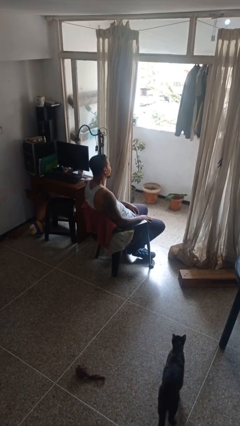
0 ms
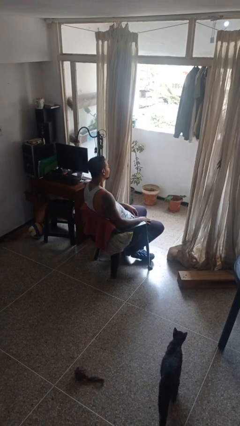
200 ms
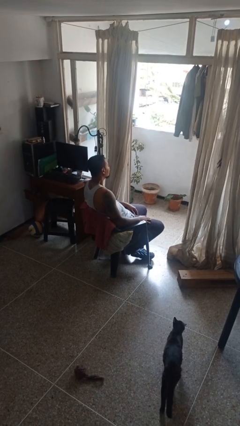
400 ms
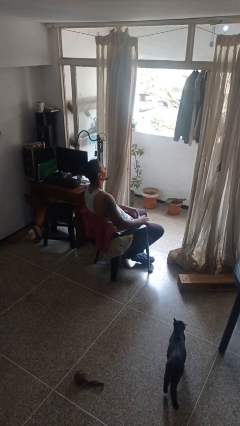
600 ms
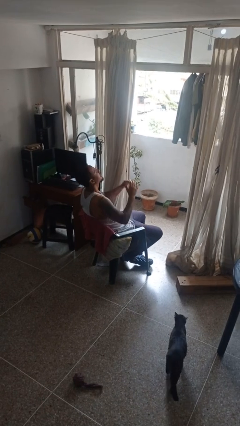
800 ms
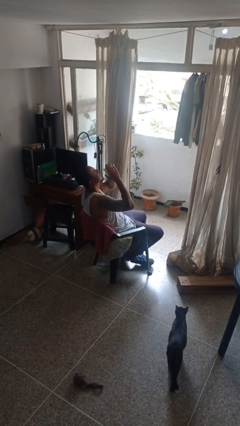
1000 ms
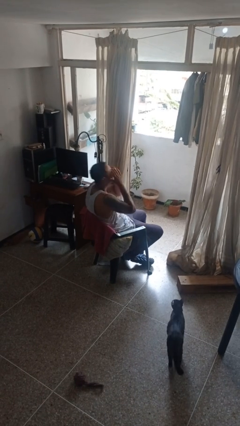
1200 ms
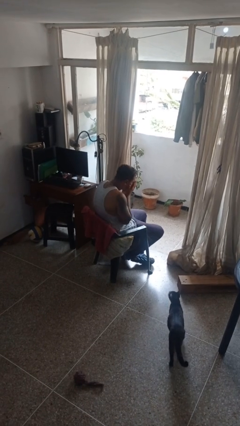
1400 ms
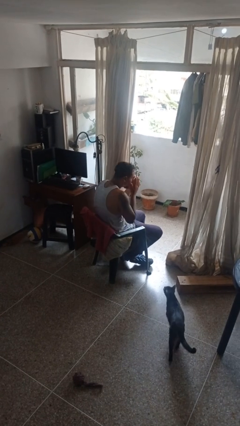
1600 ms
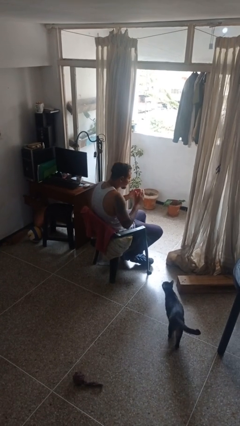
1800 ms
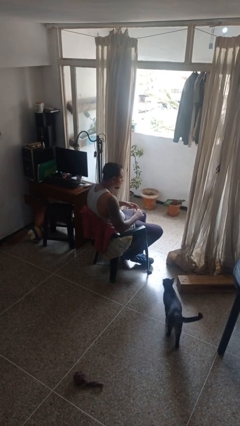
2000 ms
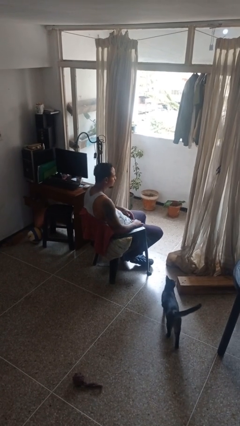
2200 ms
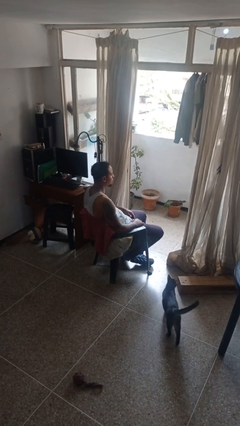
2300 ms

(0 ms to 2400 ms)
person sneezes into hand

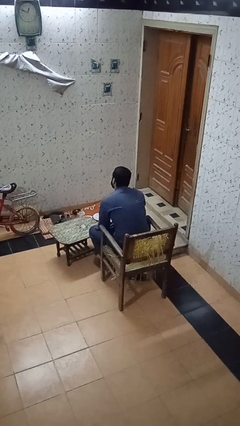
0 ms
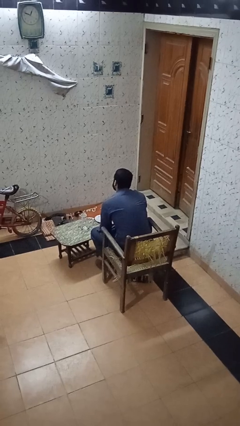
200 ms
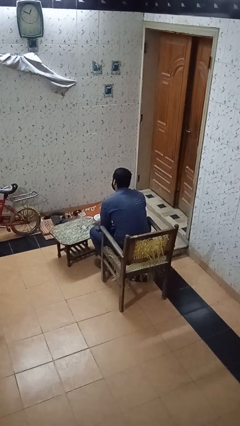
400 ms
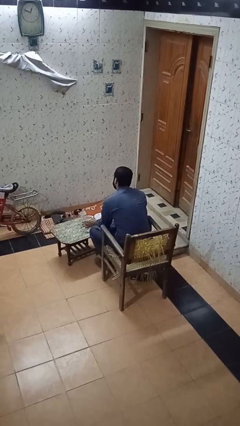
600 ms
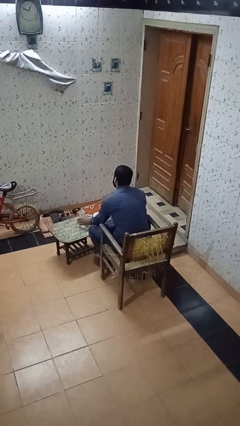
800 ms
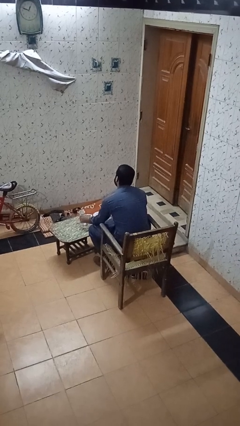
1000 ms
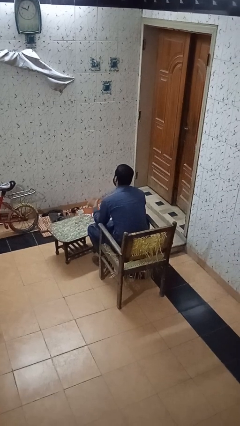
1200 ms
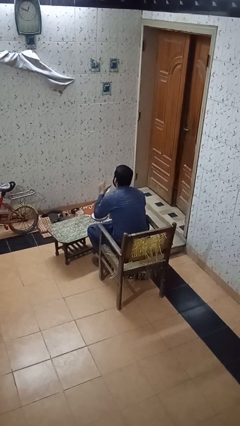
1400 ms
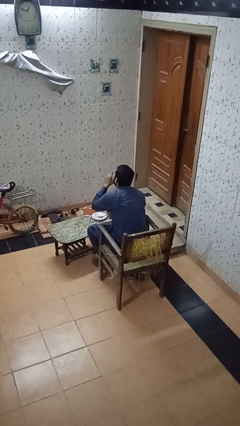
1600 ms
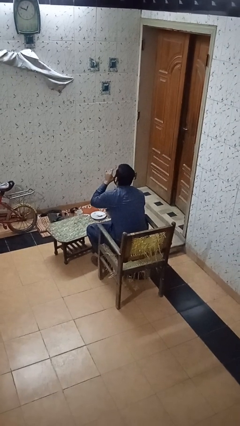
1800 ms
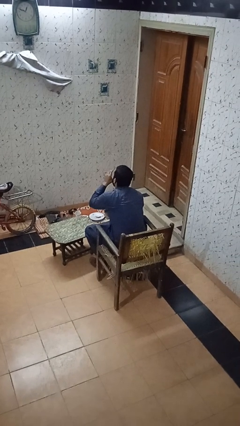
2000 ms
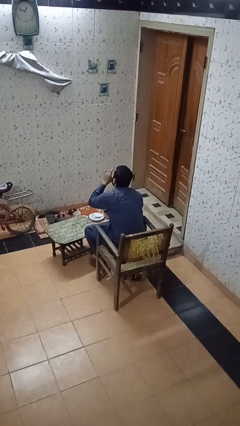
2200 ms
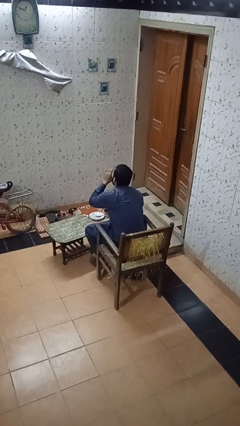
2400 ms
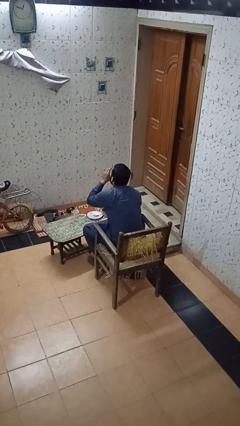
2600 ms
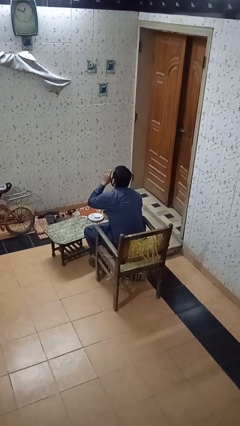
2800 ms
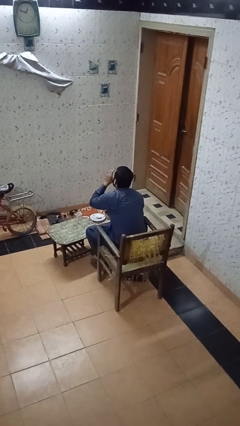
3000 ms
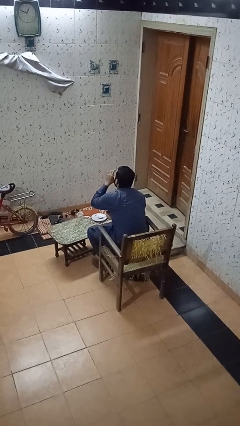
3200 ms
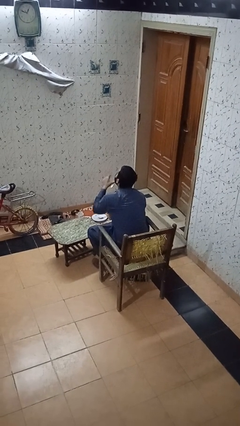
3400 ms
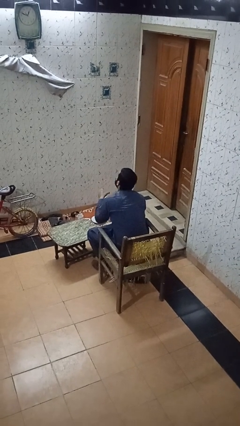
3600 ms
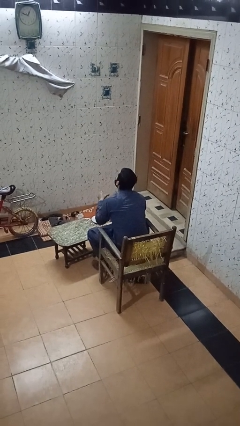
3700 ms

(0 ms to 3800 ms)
person drinks from cup

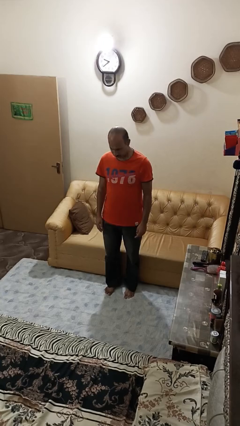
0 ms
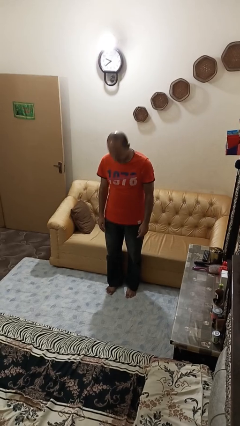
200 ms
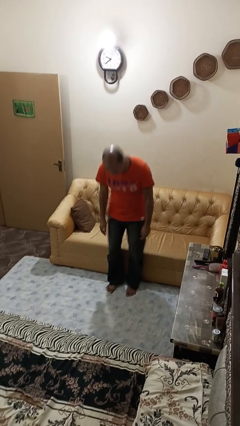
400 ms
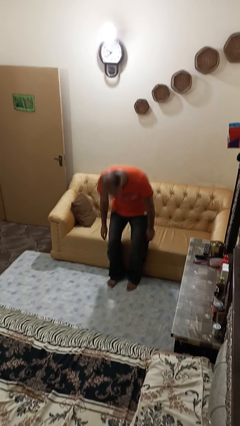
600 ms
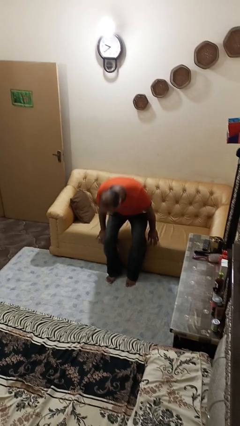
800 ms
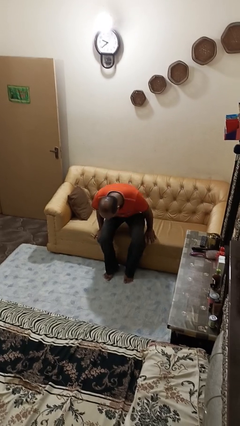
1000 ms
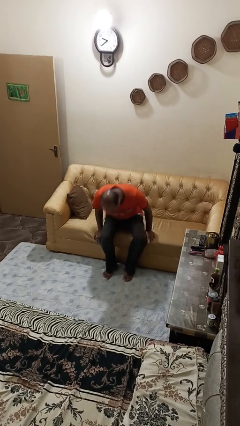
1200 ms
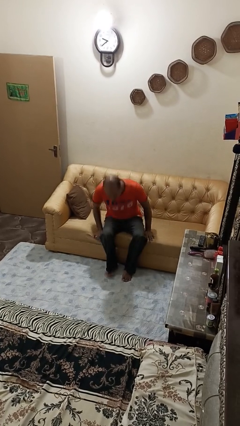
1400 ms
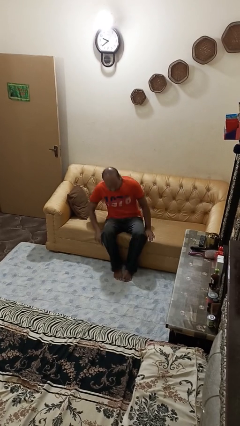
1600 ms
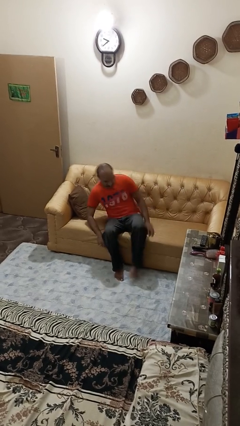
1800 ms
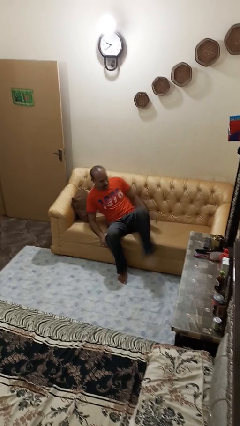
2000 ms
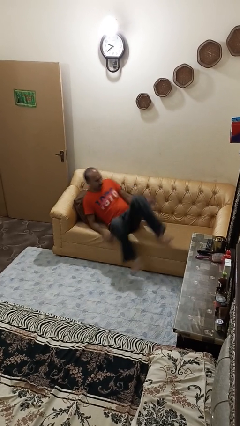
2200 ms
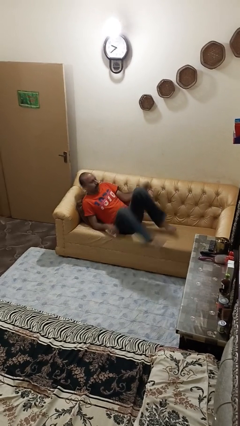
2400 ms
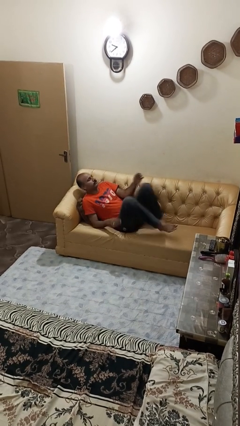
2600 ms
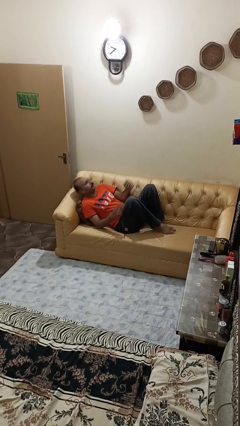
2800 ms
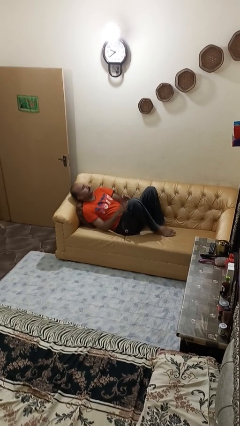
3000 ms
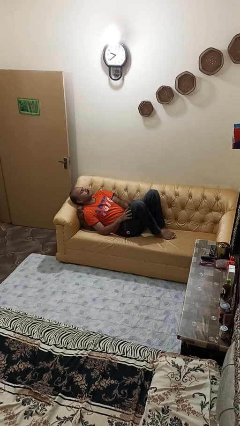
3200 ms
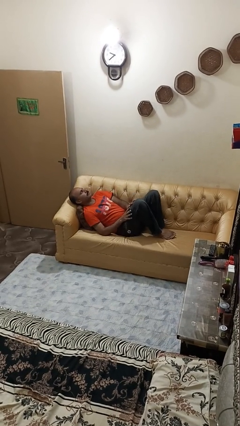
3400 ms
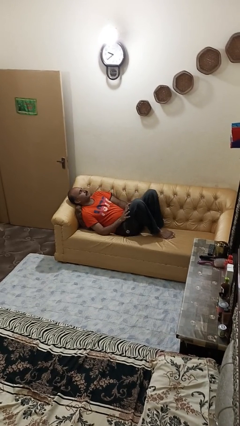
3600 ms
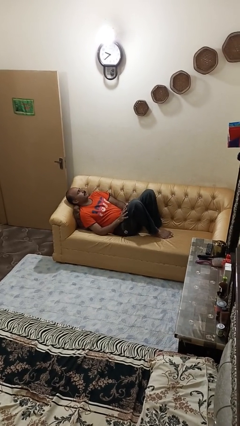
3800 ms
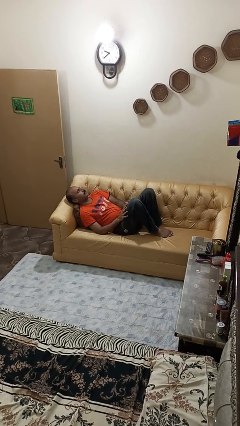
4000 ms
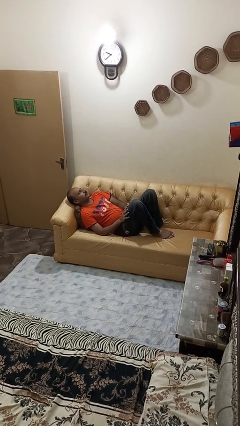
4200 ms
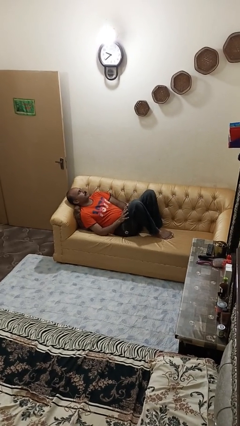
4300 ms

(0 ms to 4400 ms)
person lies down on couch

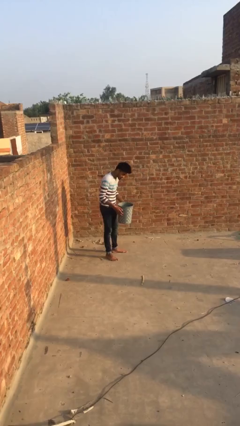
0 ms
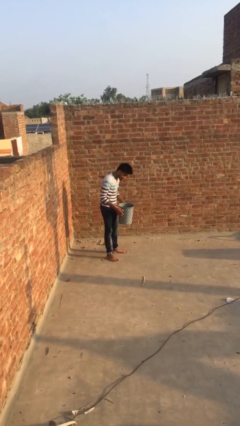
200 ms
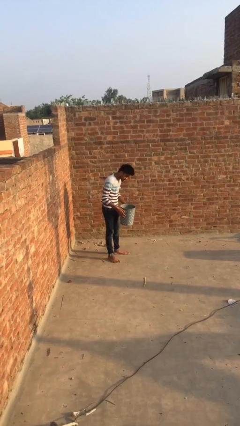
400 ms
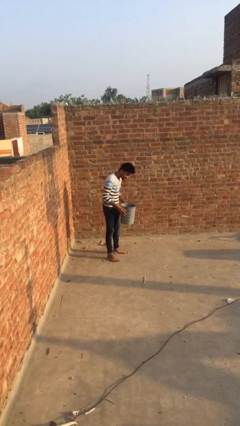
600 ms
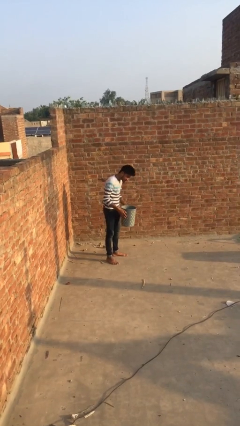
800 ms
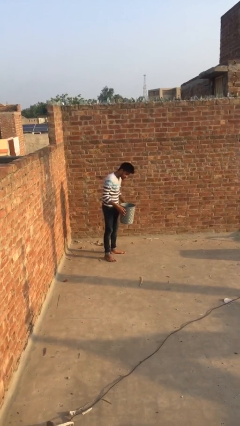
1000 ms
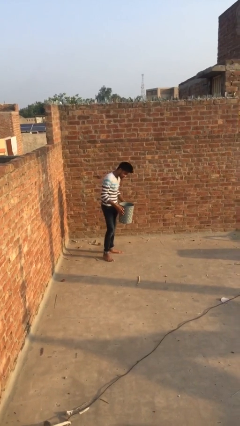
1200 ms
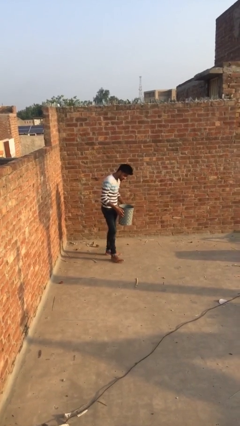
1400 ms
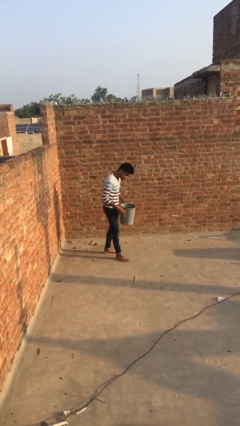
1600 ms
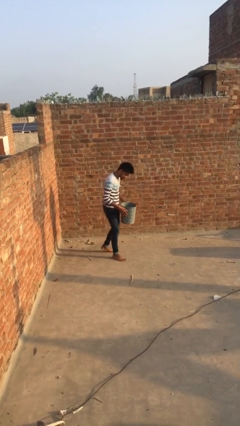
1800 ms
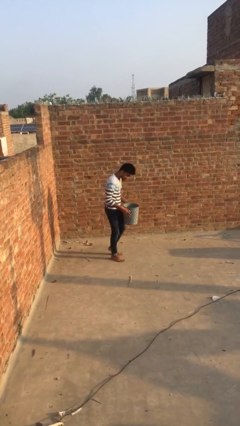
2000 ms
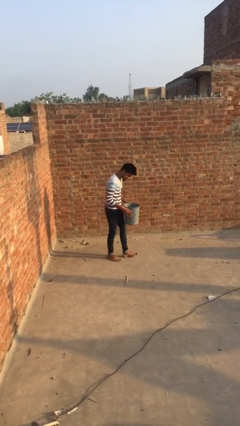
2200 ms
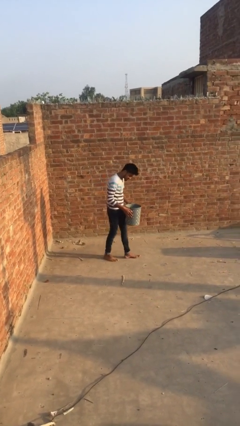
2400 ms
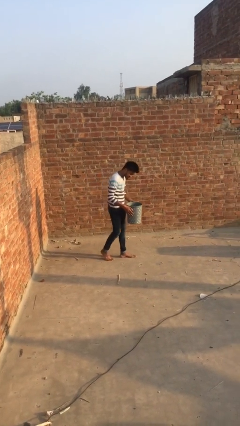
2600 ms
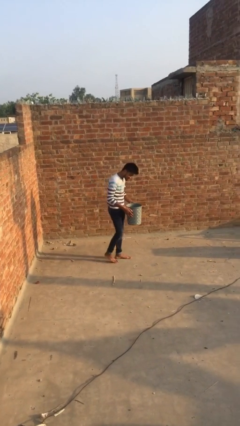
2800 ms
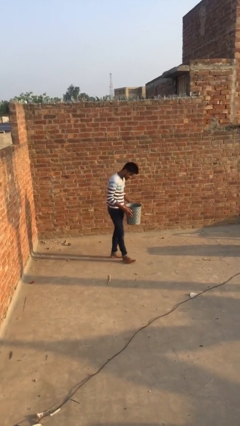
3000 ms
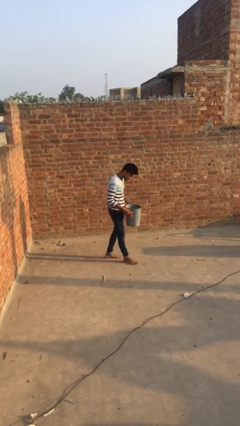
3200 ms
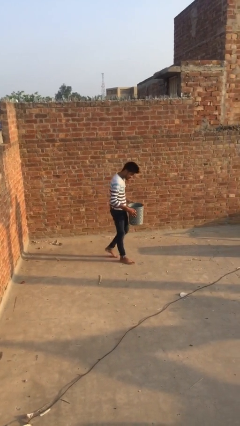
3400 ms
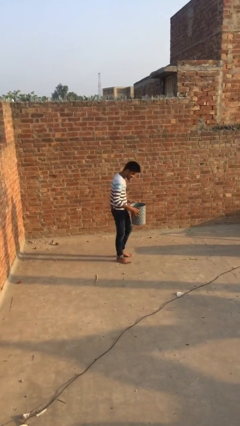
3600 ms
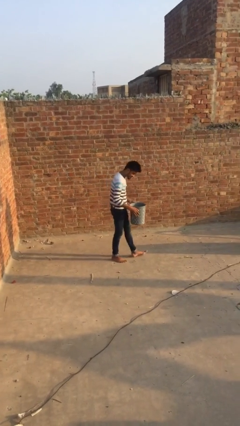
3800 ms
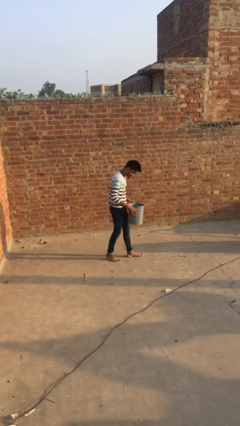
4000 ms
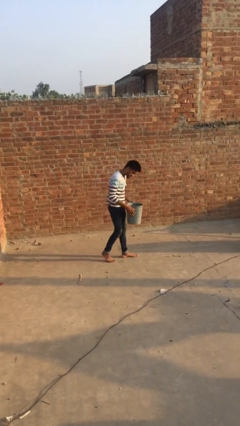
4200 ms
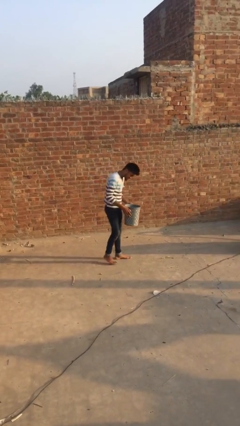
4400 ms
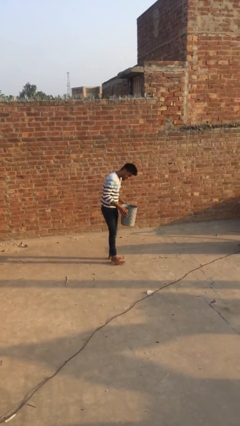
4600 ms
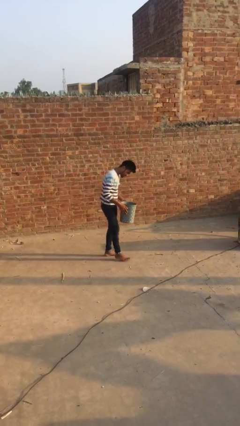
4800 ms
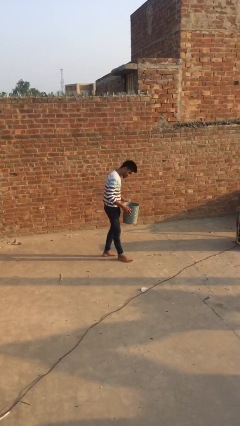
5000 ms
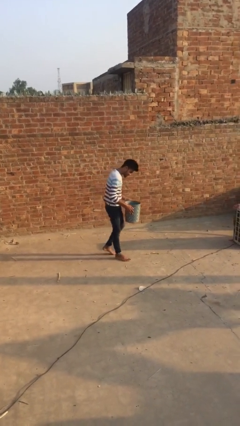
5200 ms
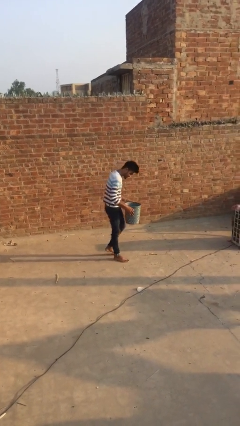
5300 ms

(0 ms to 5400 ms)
person carries heavy object

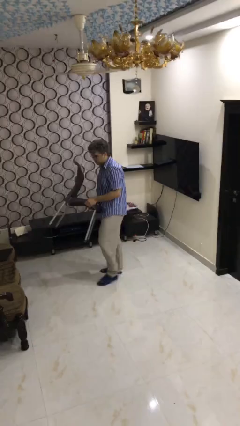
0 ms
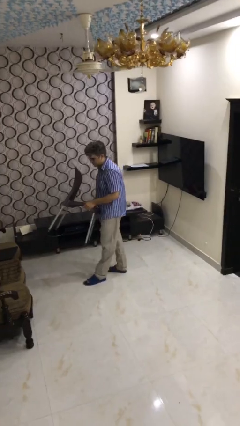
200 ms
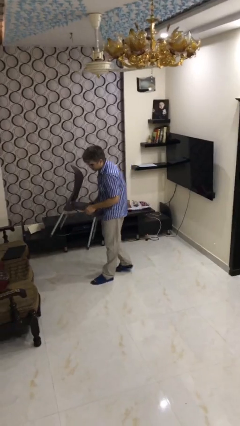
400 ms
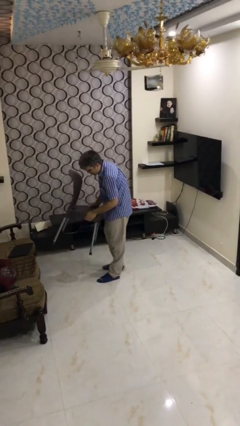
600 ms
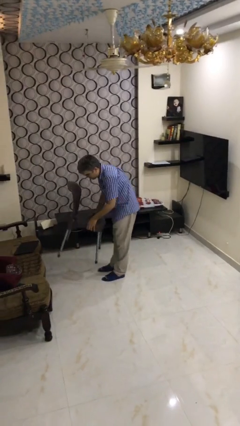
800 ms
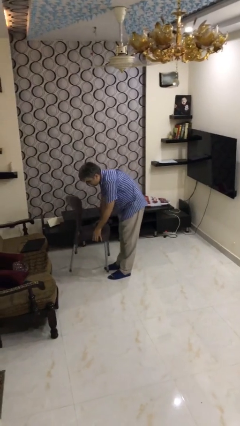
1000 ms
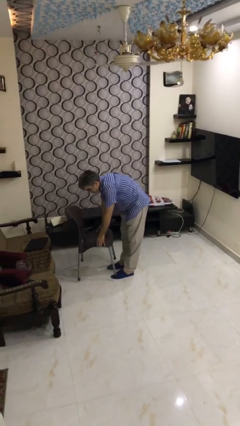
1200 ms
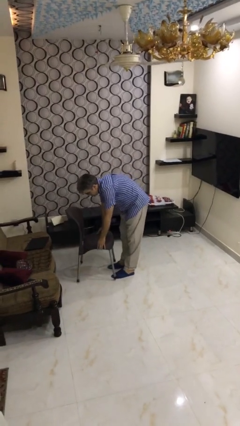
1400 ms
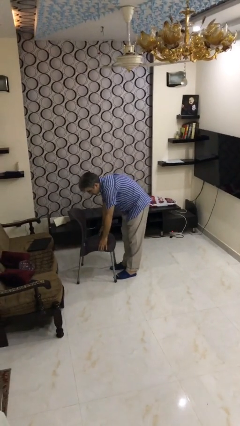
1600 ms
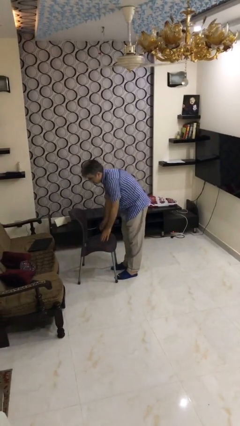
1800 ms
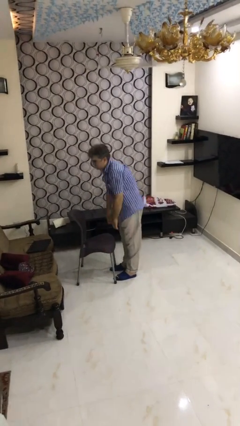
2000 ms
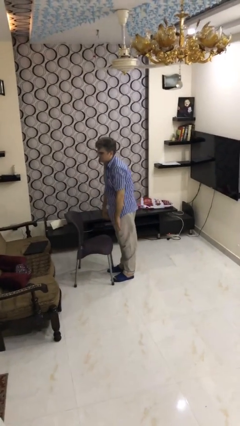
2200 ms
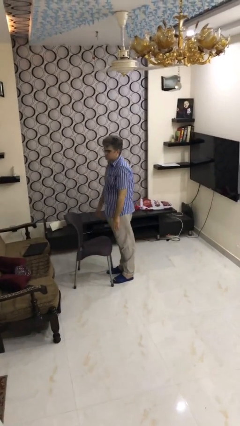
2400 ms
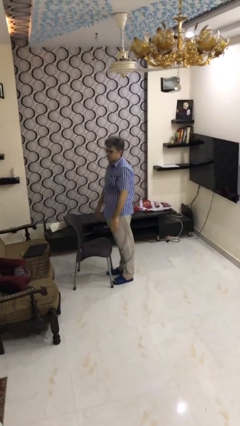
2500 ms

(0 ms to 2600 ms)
person puts down object on floor
